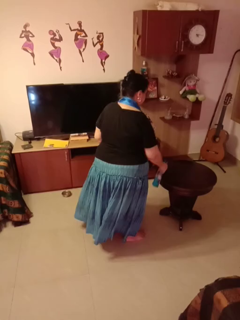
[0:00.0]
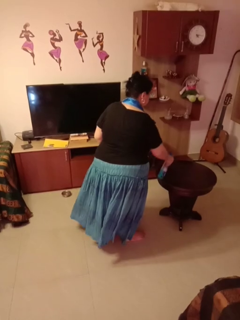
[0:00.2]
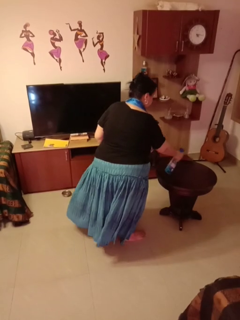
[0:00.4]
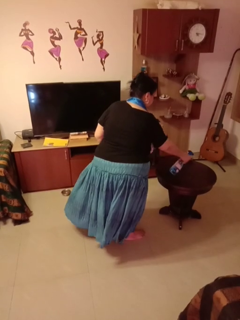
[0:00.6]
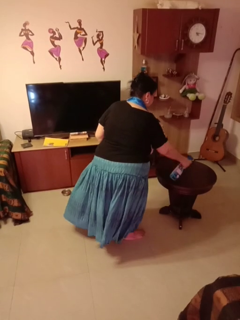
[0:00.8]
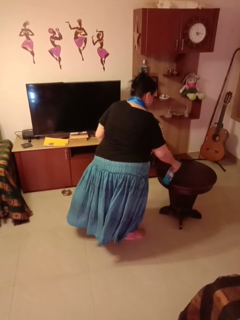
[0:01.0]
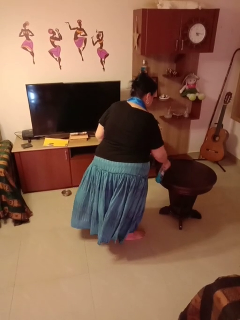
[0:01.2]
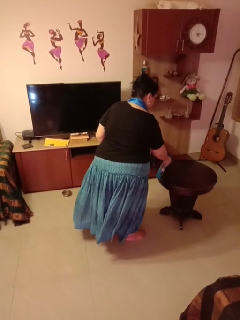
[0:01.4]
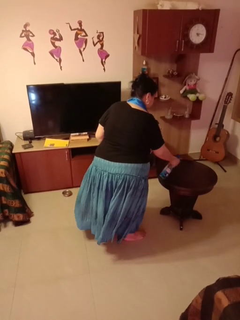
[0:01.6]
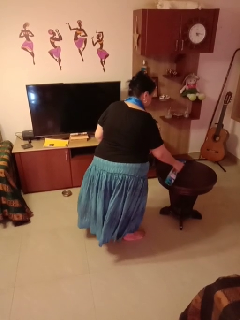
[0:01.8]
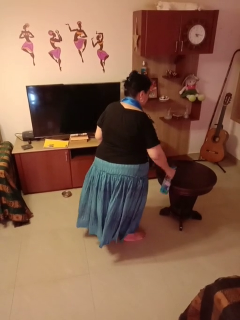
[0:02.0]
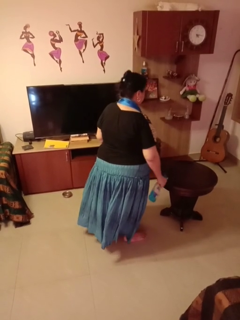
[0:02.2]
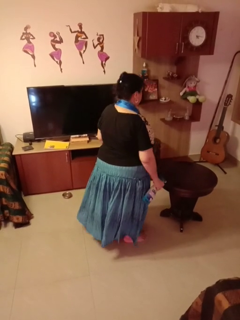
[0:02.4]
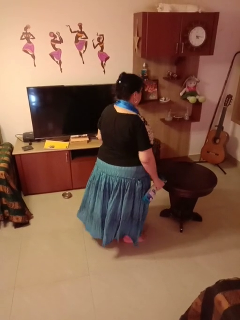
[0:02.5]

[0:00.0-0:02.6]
person sprays from bottle

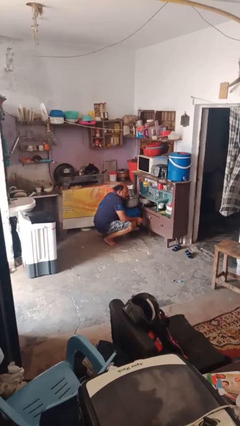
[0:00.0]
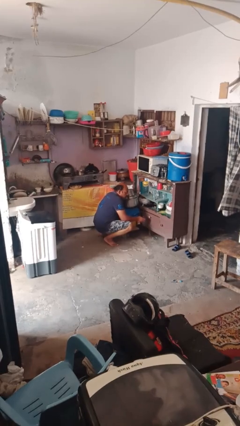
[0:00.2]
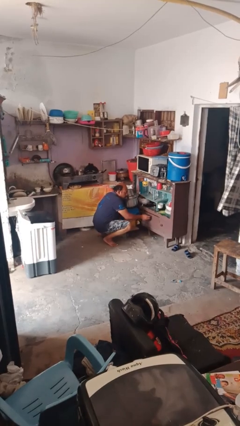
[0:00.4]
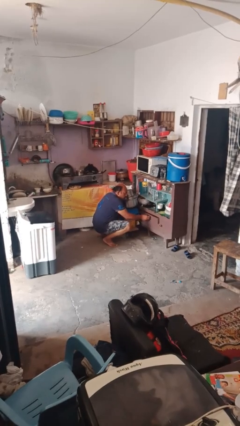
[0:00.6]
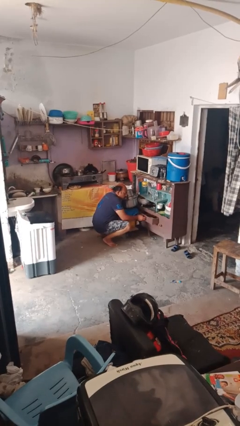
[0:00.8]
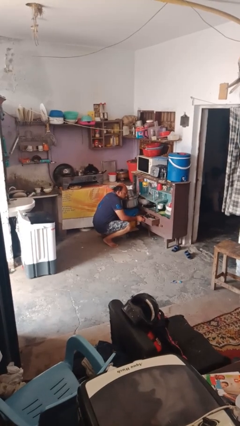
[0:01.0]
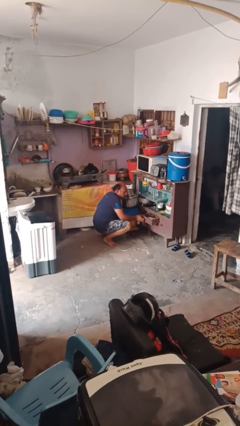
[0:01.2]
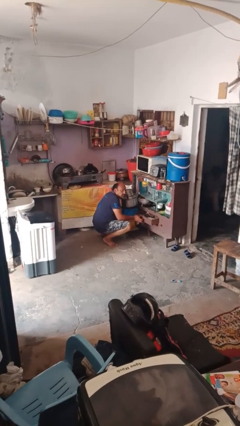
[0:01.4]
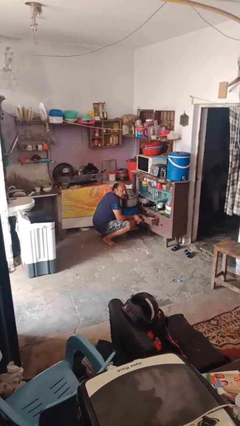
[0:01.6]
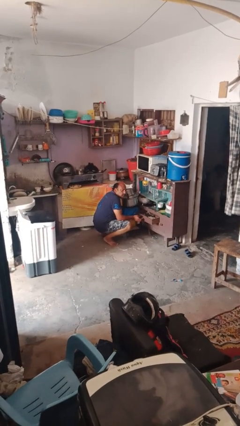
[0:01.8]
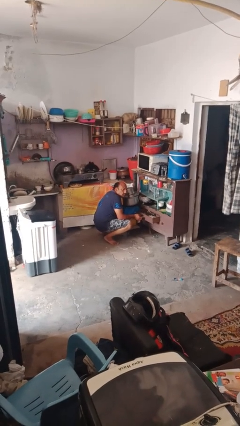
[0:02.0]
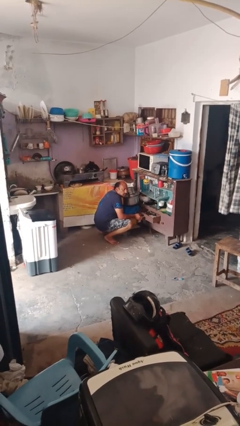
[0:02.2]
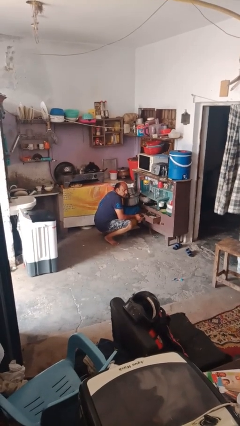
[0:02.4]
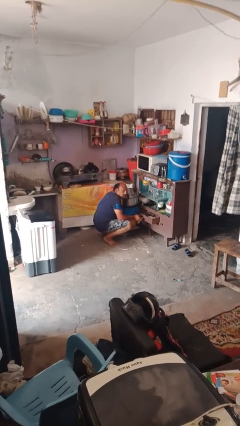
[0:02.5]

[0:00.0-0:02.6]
person opens kitchen drawer

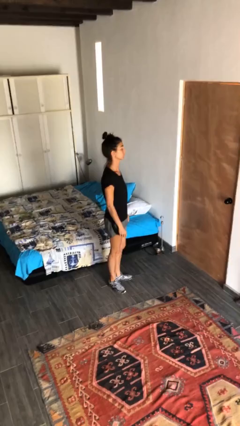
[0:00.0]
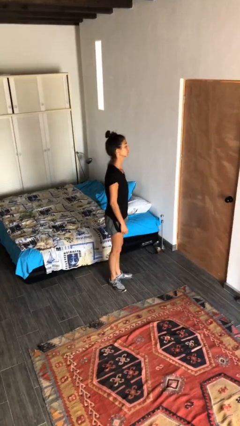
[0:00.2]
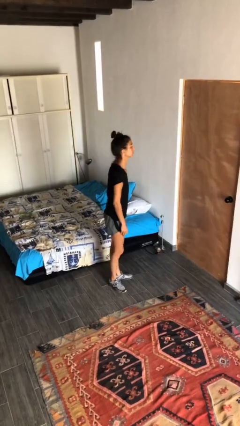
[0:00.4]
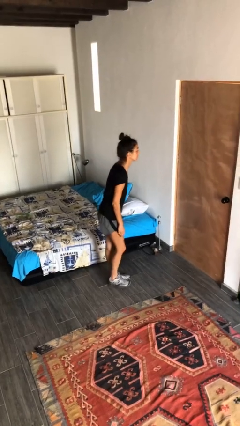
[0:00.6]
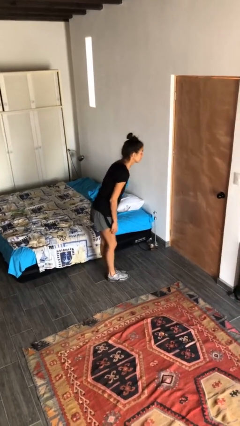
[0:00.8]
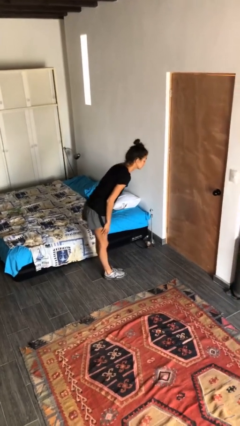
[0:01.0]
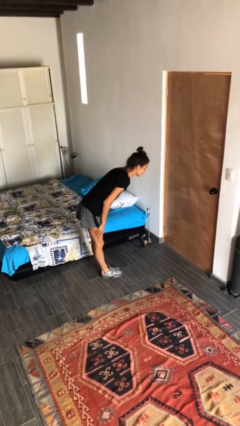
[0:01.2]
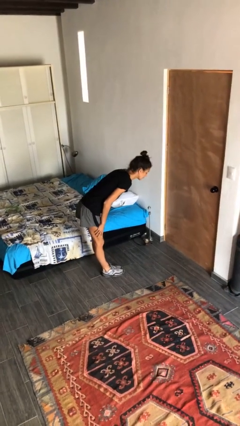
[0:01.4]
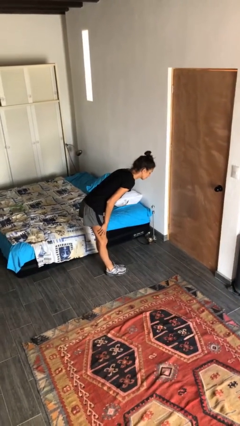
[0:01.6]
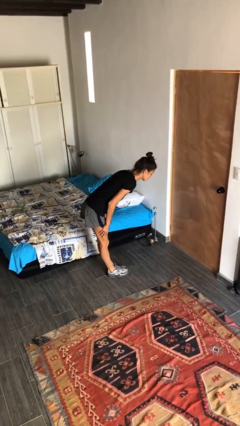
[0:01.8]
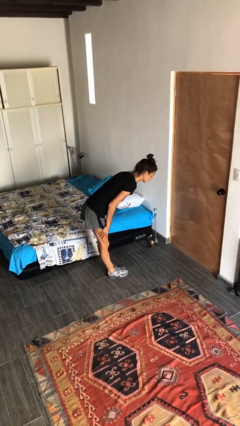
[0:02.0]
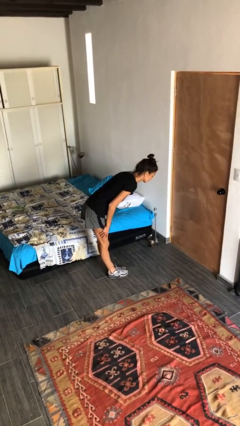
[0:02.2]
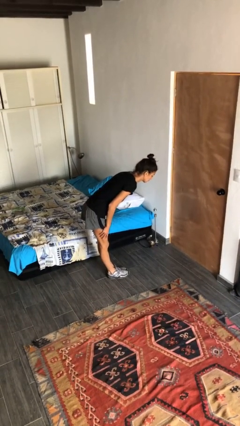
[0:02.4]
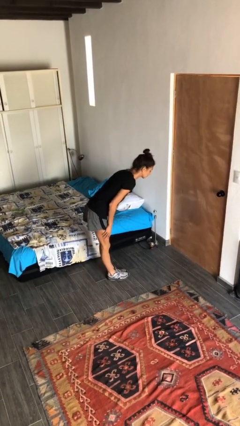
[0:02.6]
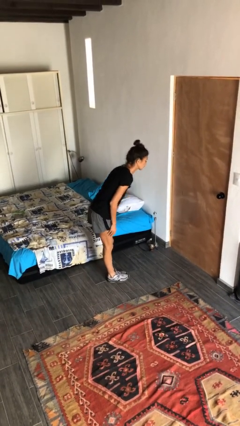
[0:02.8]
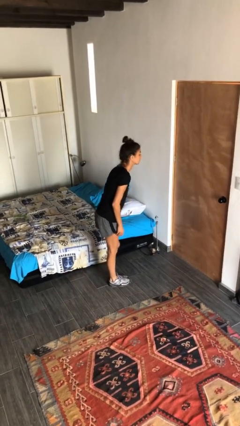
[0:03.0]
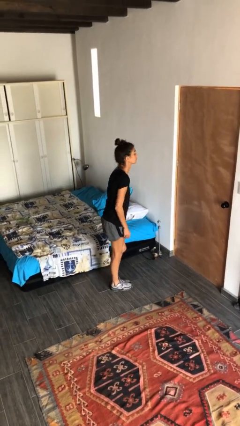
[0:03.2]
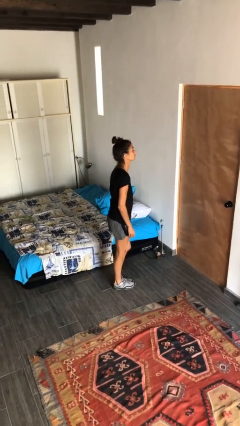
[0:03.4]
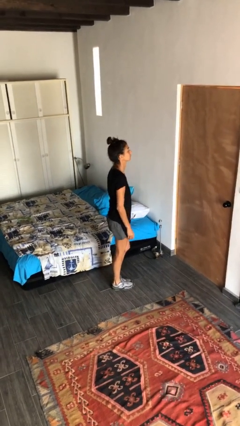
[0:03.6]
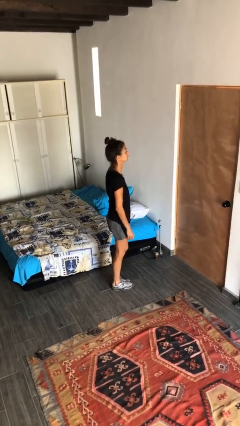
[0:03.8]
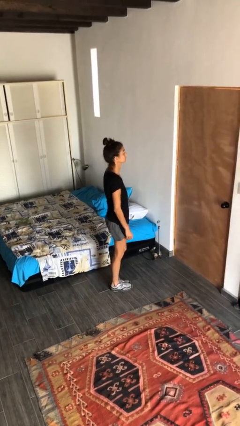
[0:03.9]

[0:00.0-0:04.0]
person bows

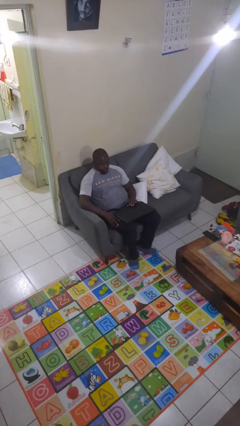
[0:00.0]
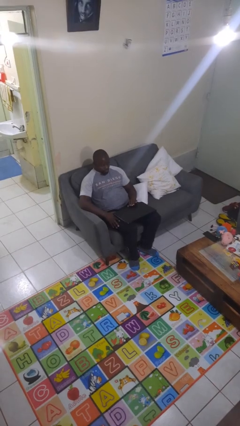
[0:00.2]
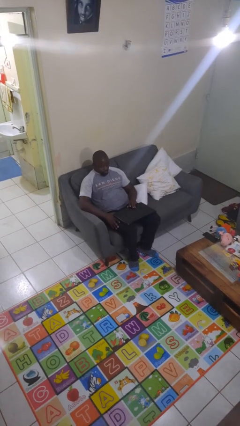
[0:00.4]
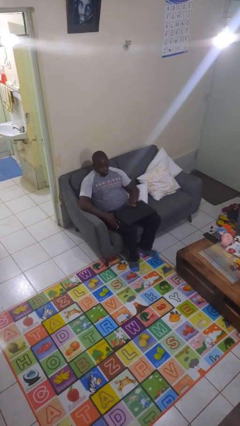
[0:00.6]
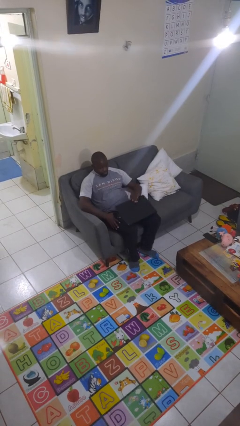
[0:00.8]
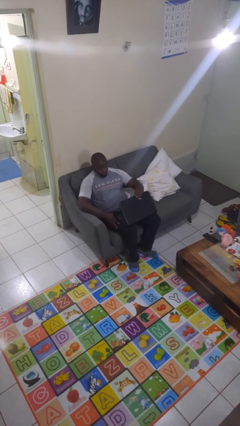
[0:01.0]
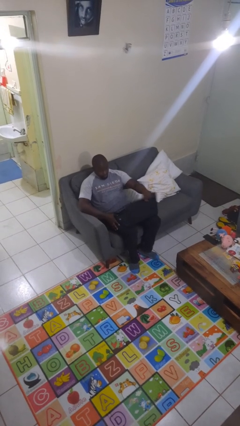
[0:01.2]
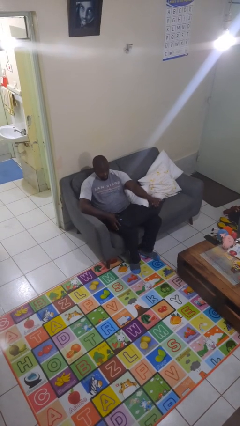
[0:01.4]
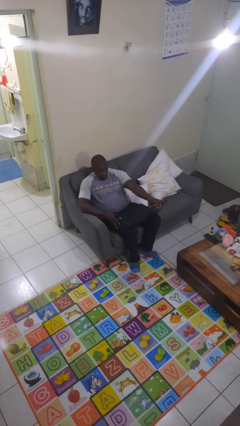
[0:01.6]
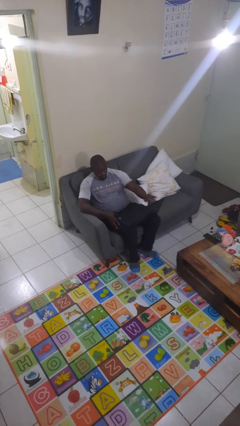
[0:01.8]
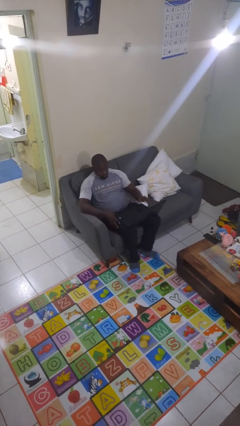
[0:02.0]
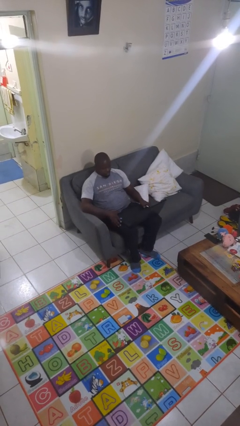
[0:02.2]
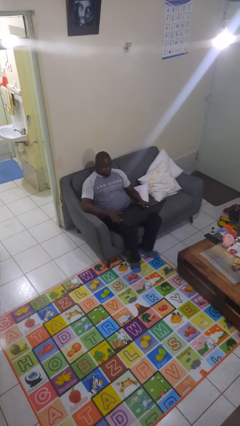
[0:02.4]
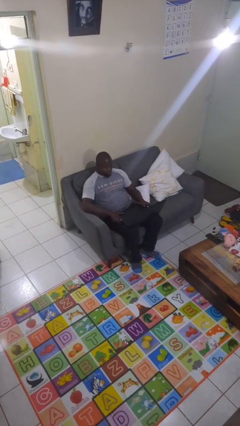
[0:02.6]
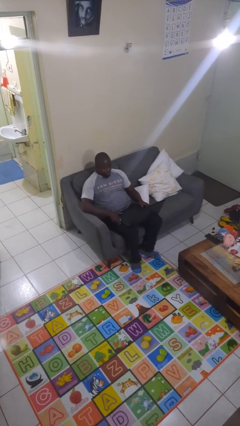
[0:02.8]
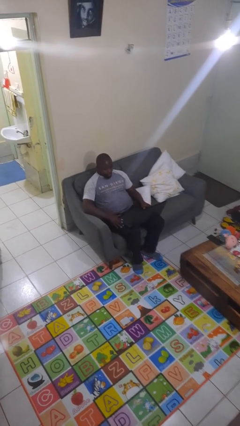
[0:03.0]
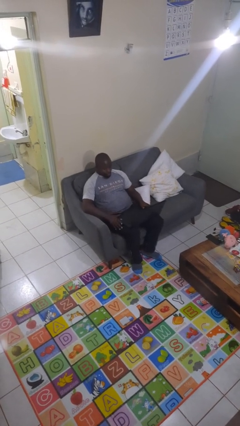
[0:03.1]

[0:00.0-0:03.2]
person opens laptop

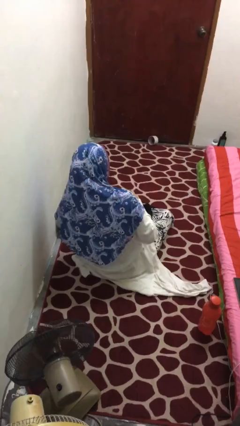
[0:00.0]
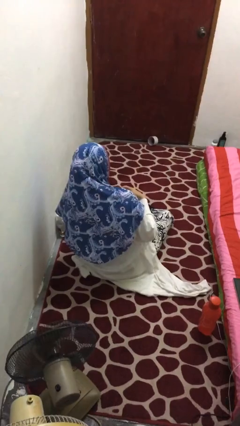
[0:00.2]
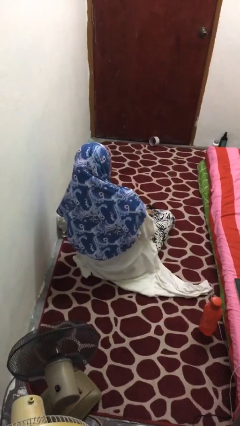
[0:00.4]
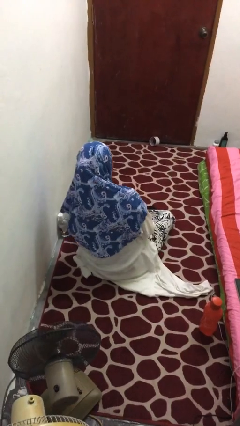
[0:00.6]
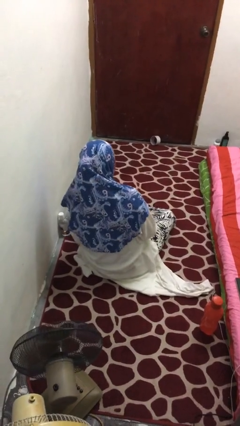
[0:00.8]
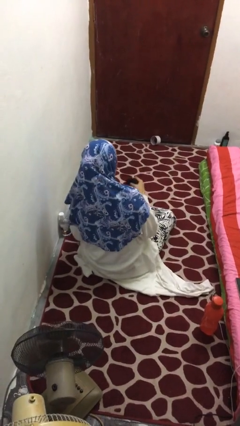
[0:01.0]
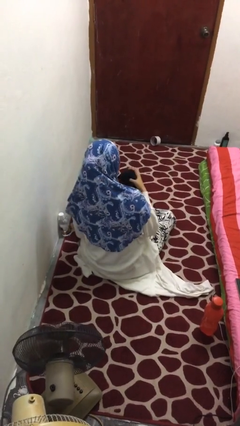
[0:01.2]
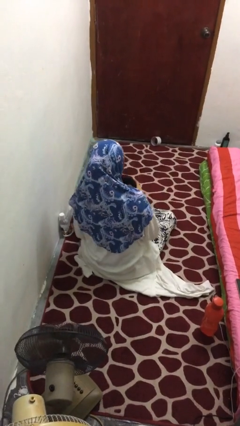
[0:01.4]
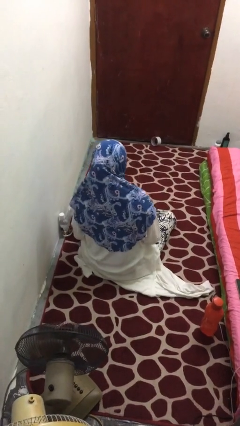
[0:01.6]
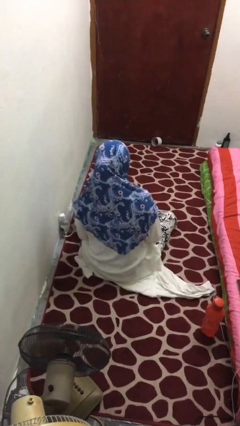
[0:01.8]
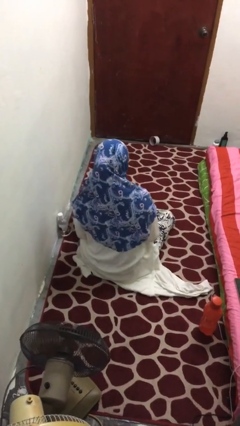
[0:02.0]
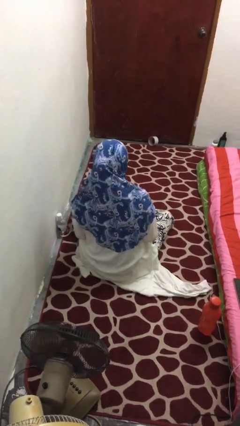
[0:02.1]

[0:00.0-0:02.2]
person picks up object from floor

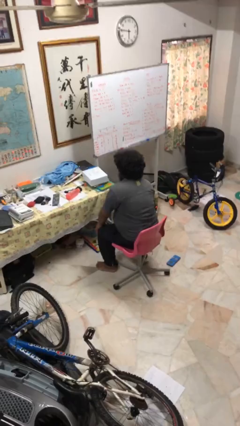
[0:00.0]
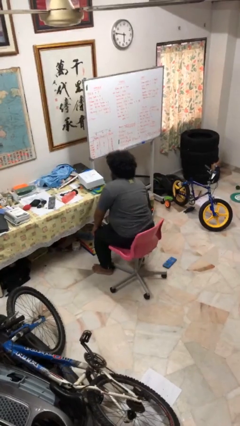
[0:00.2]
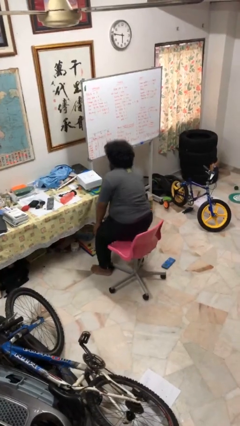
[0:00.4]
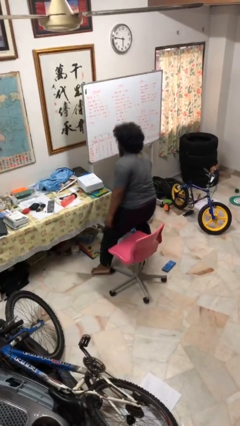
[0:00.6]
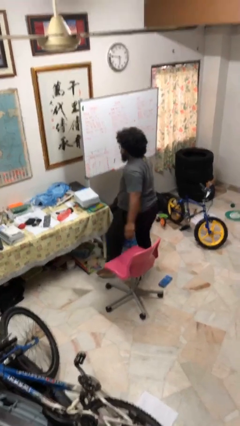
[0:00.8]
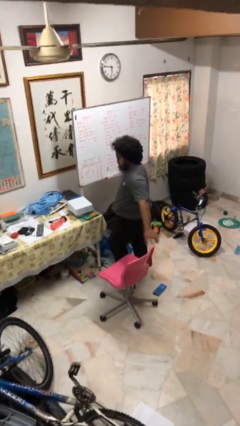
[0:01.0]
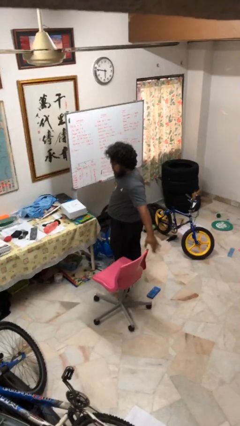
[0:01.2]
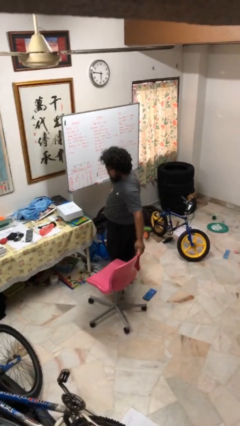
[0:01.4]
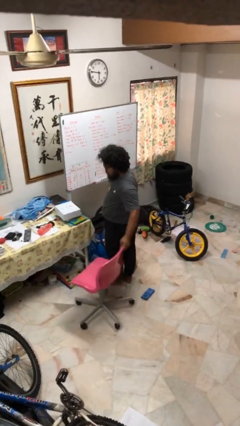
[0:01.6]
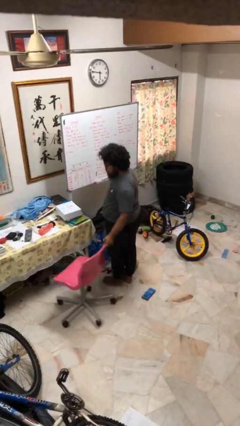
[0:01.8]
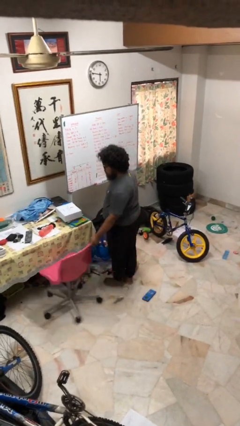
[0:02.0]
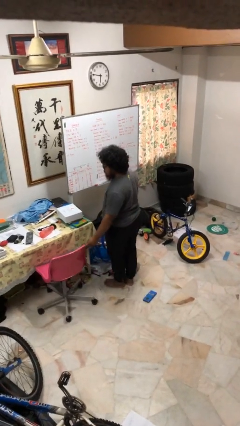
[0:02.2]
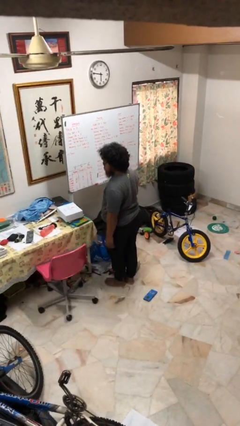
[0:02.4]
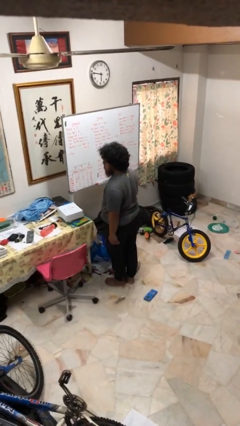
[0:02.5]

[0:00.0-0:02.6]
person stands up

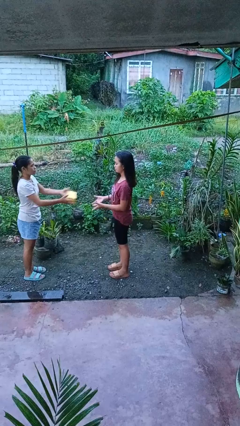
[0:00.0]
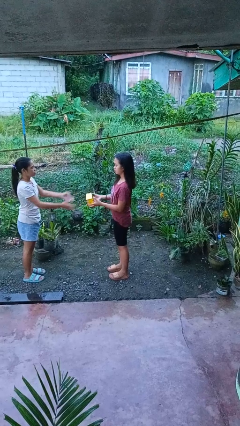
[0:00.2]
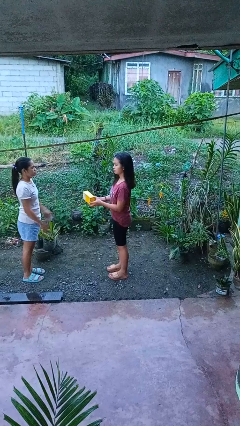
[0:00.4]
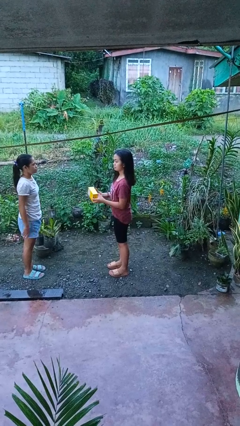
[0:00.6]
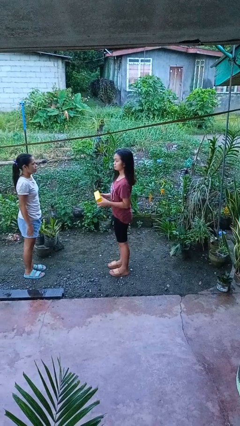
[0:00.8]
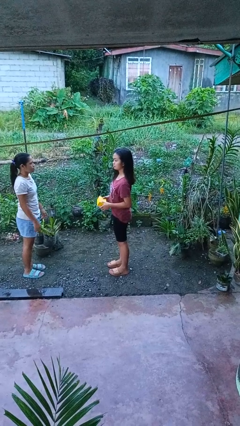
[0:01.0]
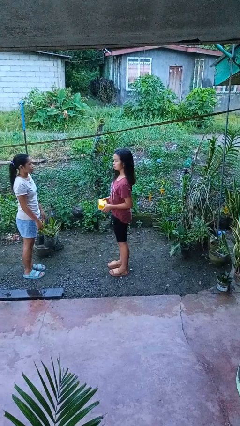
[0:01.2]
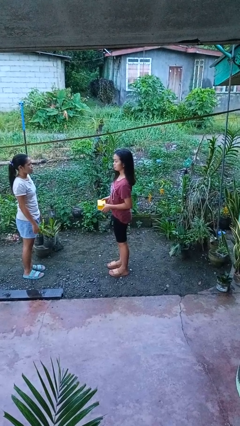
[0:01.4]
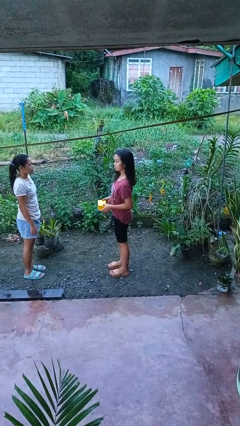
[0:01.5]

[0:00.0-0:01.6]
person catches object from person
